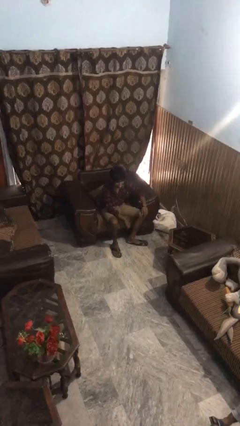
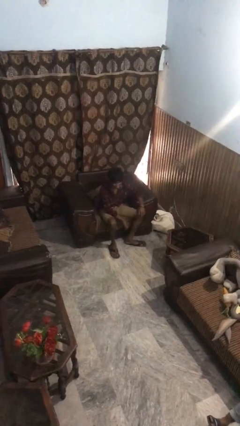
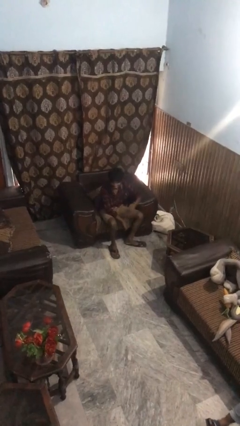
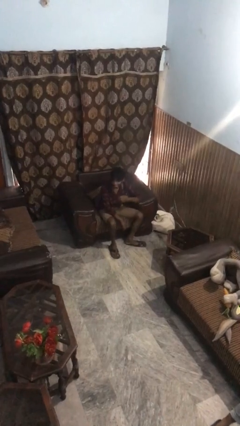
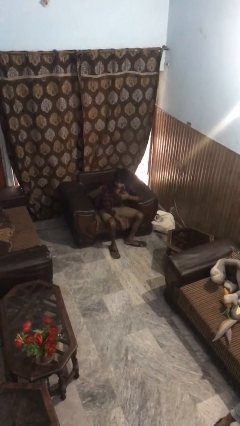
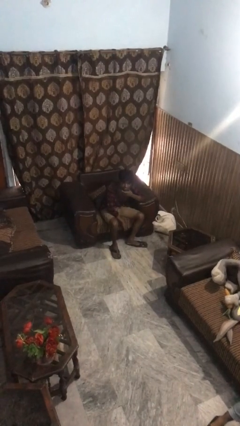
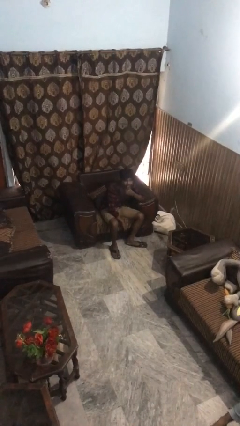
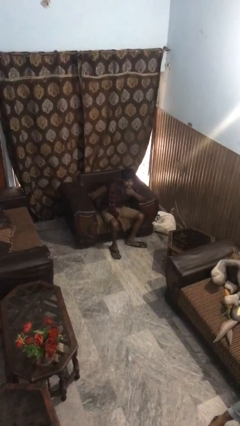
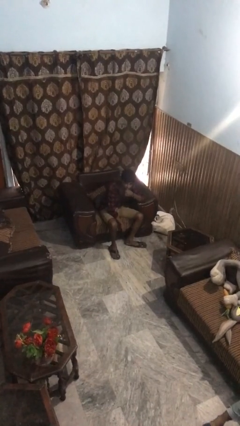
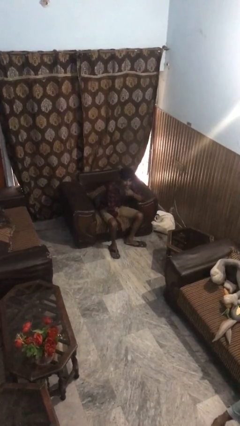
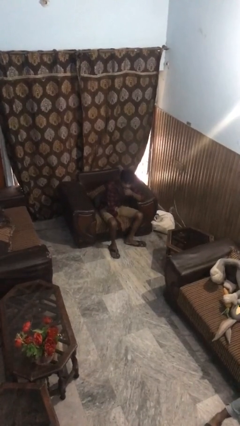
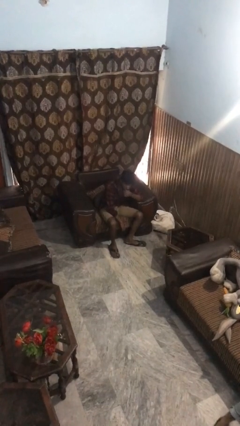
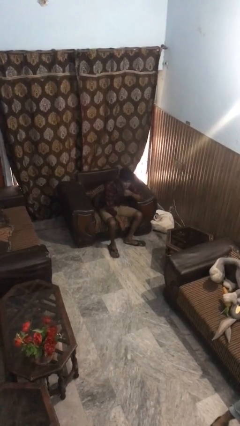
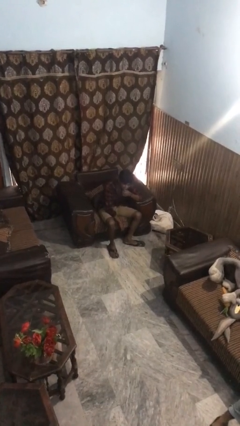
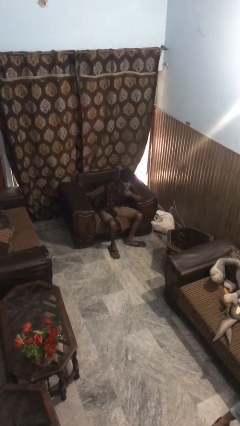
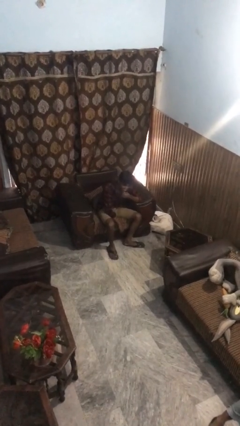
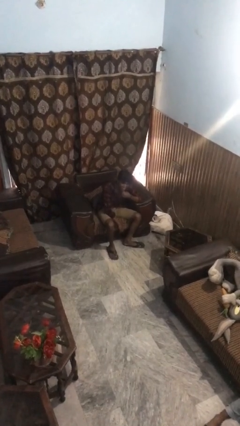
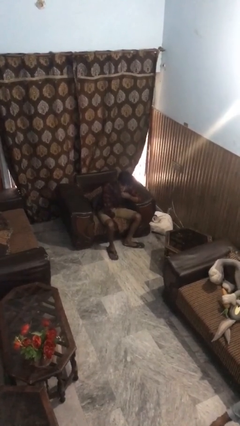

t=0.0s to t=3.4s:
person strokes chin

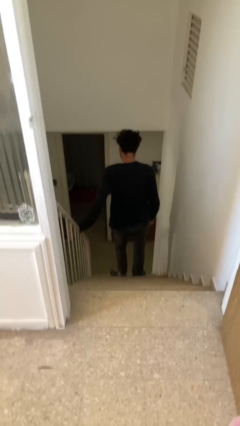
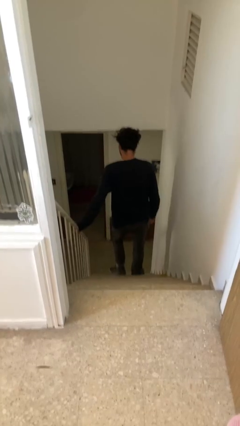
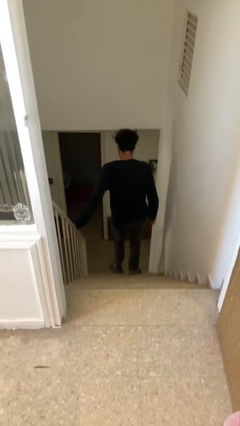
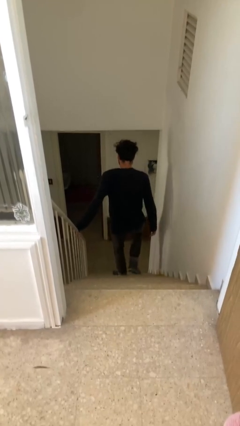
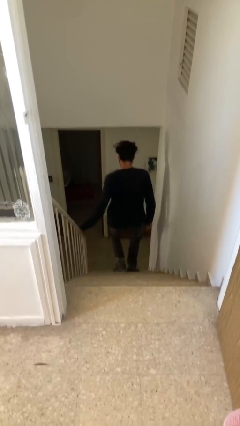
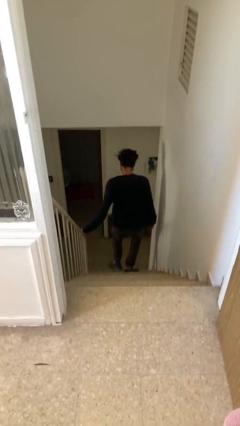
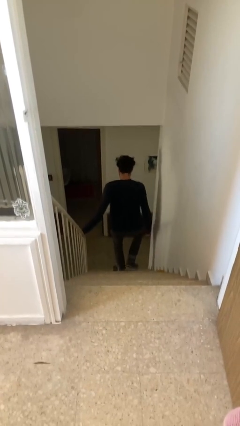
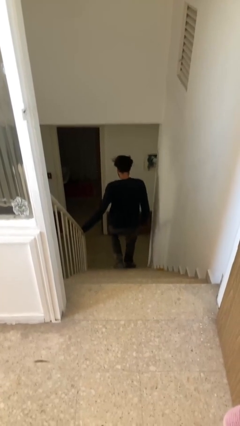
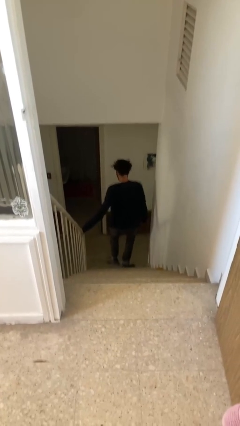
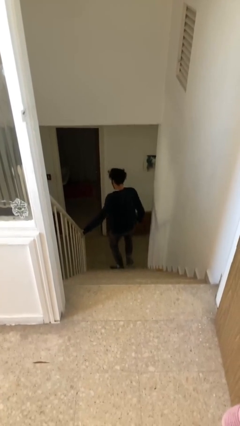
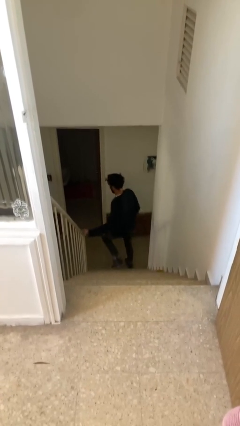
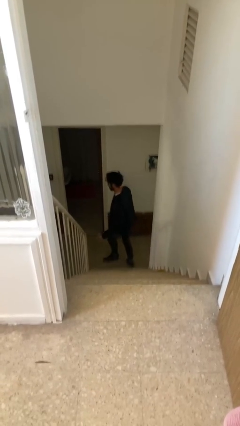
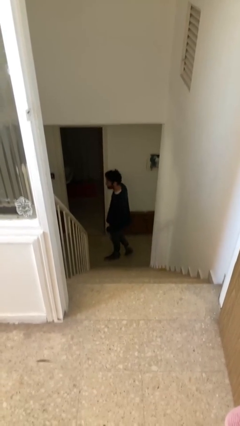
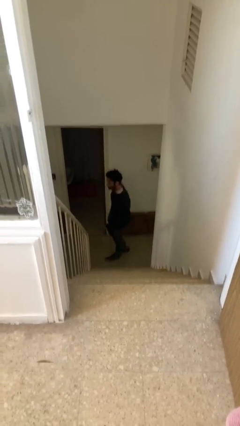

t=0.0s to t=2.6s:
person climbs down stairs

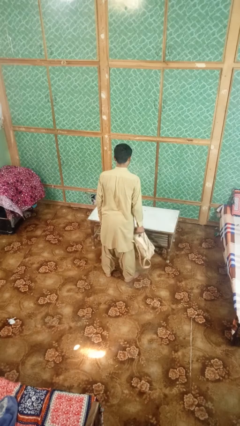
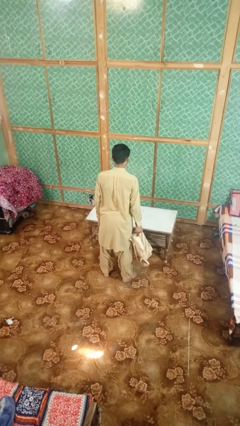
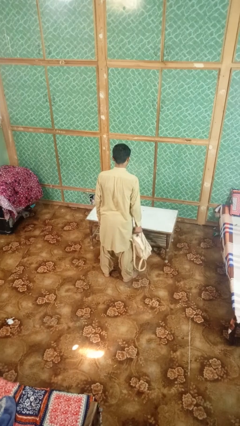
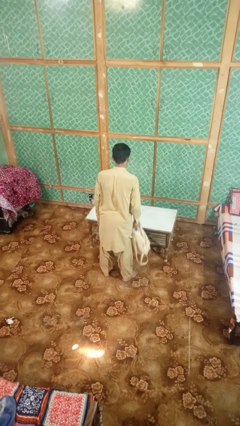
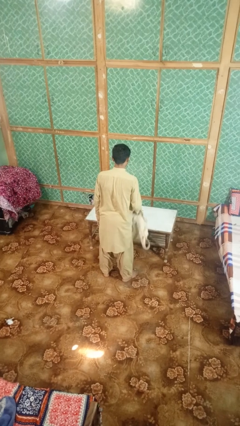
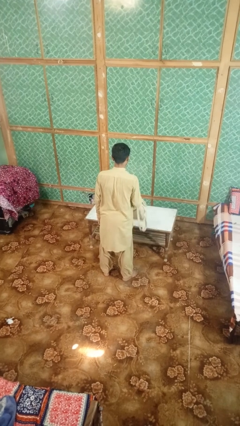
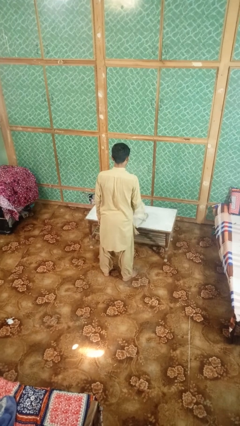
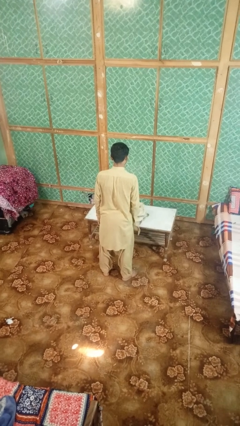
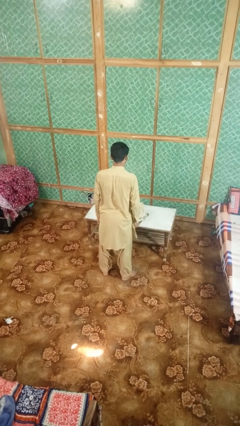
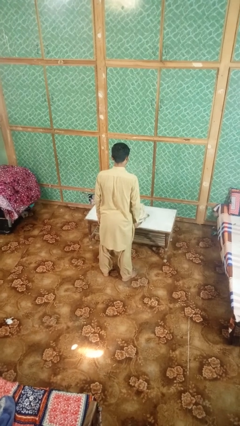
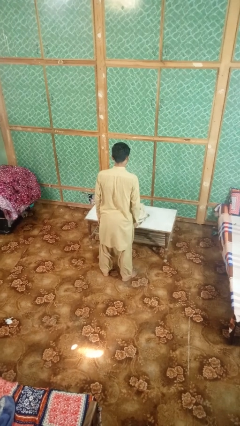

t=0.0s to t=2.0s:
person throws object on table

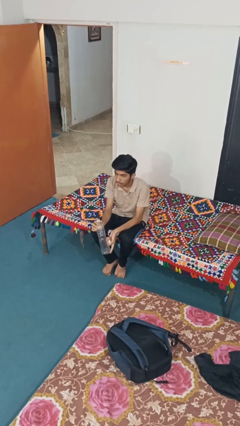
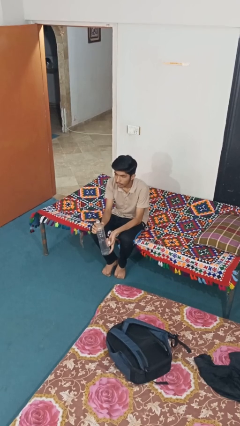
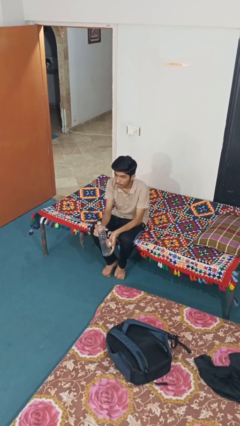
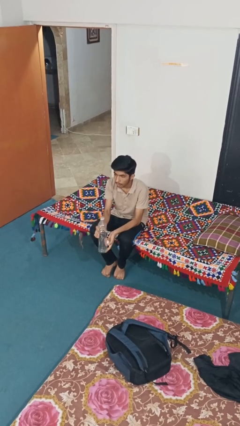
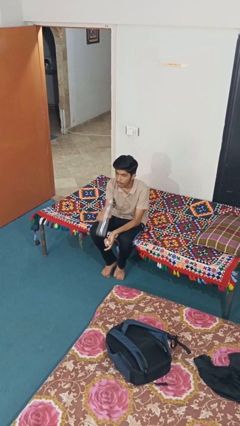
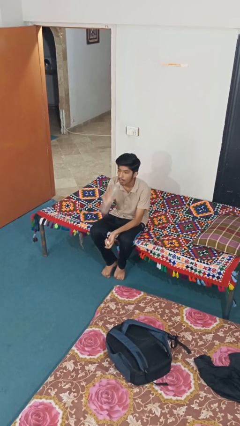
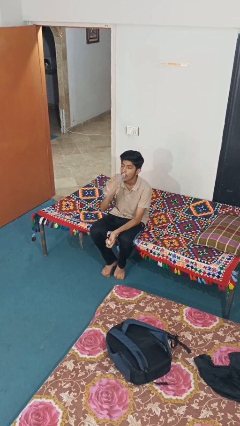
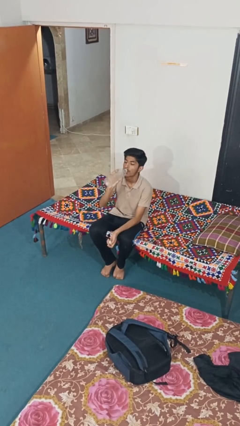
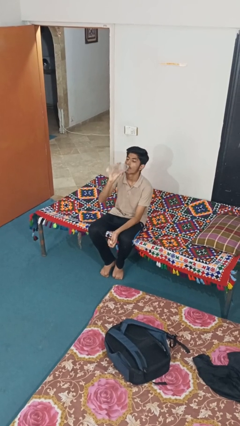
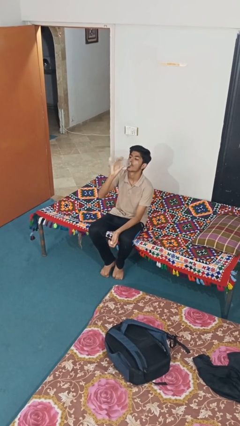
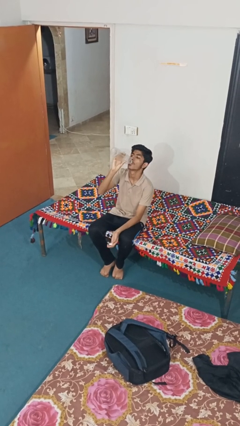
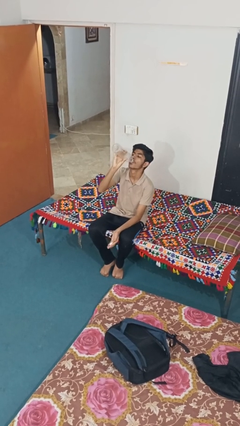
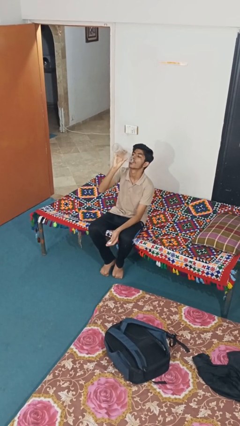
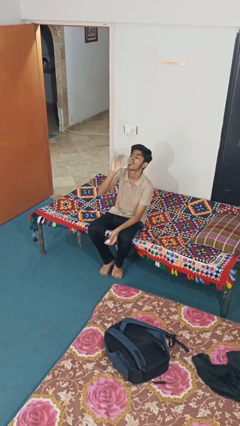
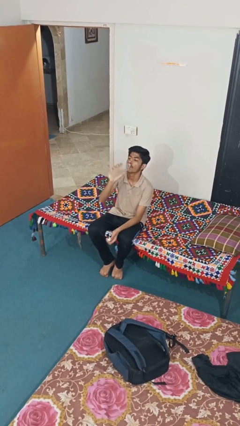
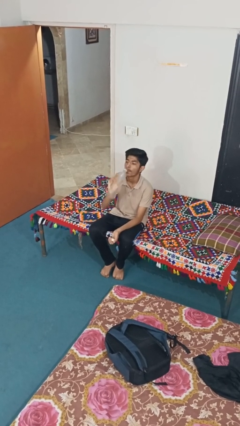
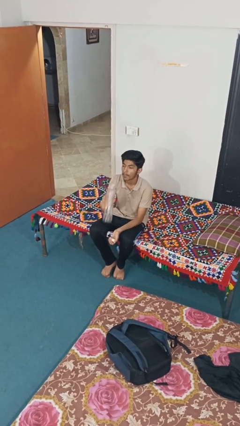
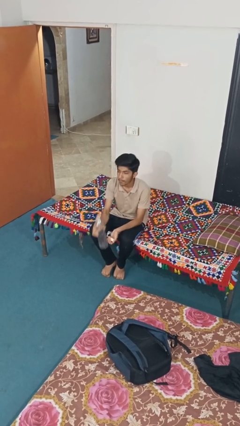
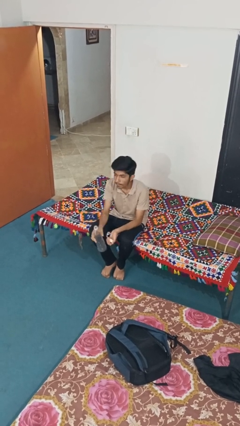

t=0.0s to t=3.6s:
person drinks from bottle

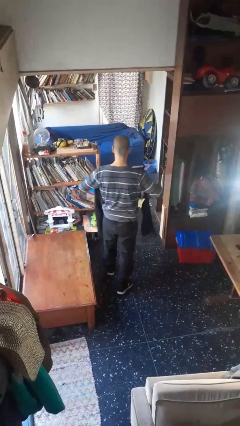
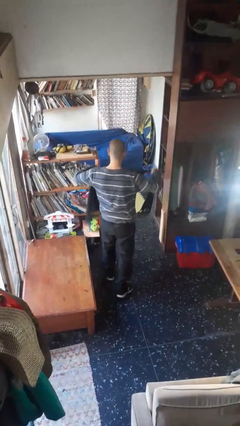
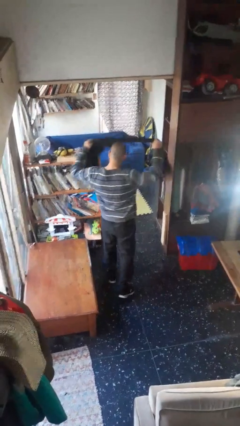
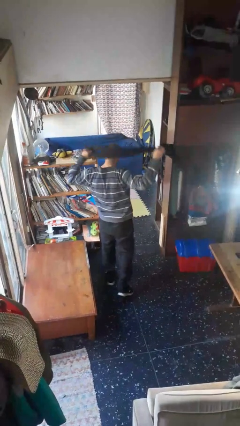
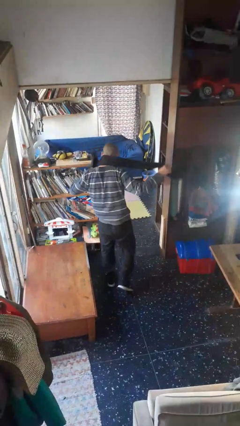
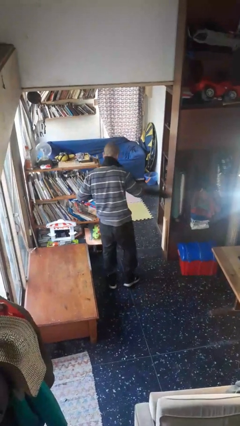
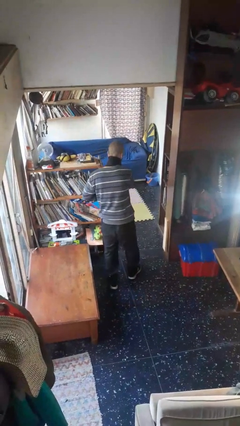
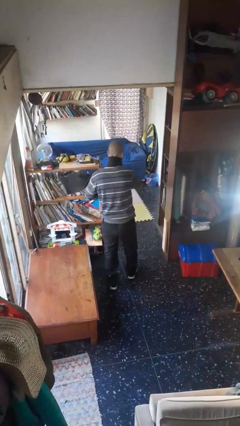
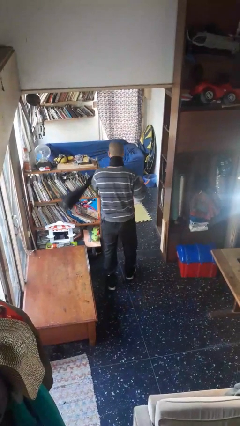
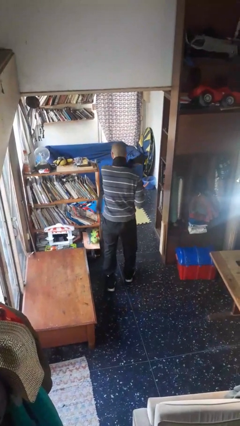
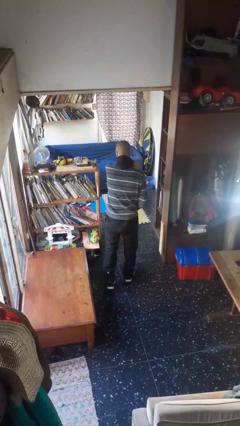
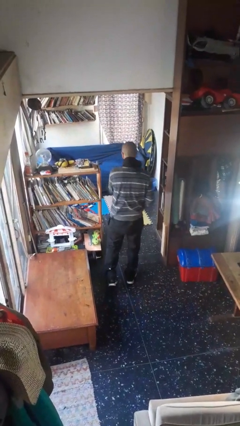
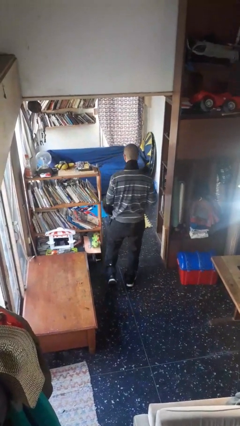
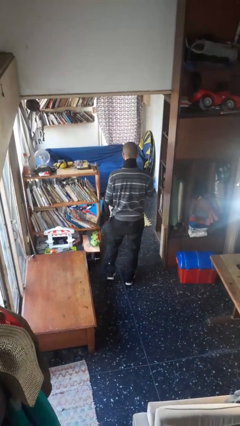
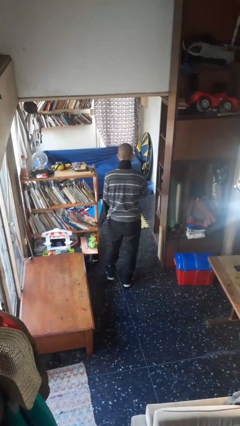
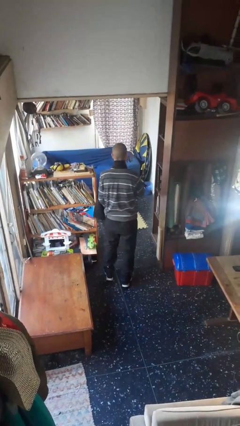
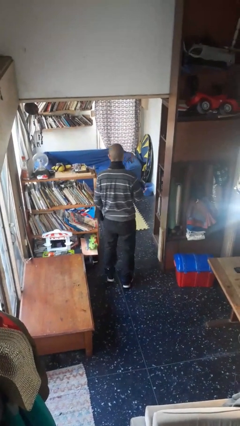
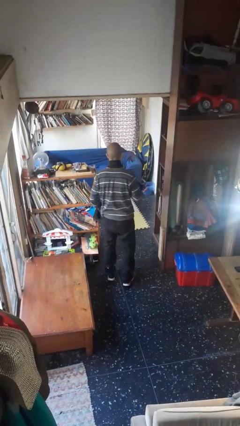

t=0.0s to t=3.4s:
person puts on scarf

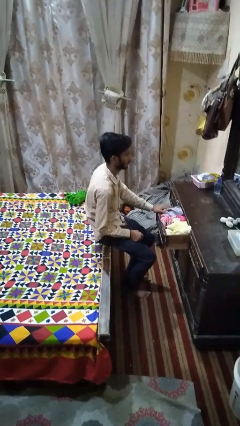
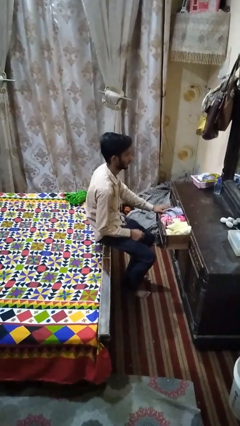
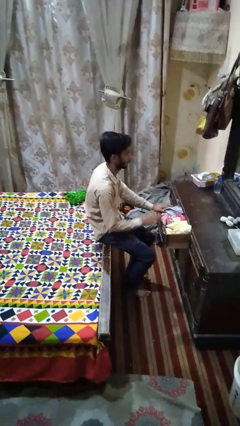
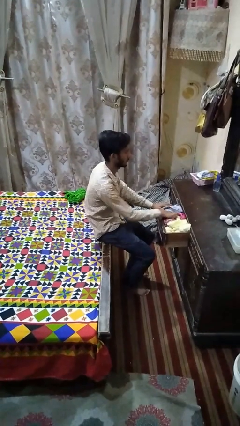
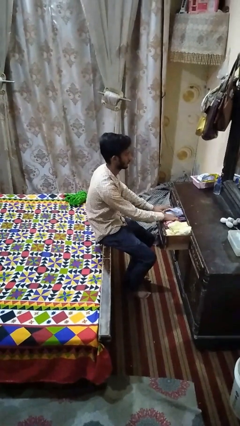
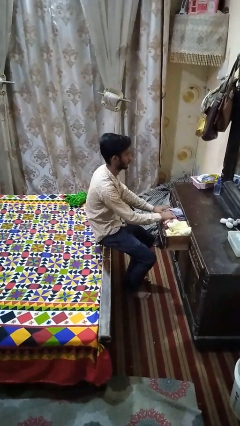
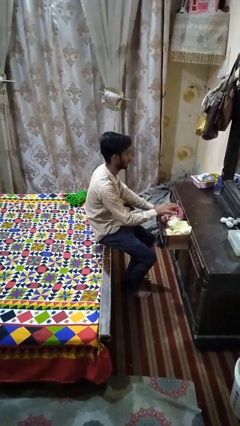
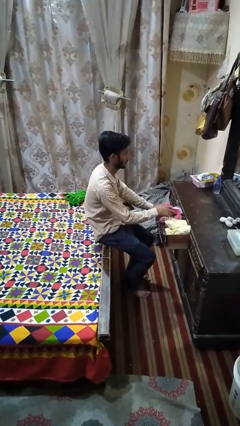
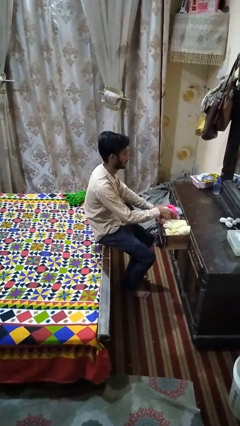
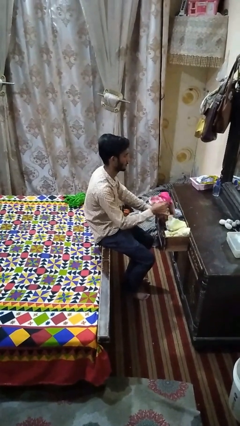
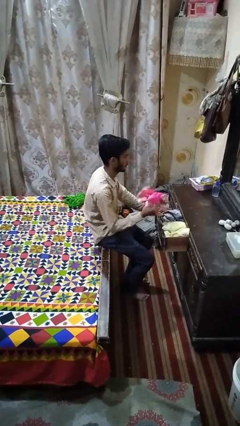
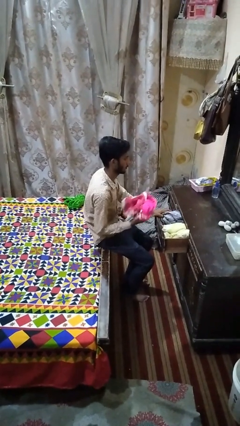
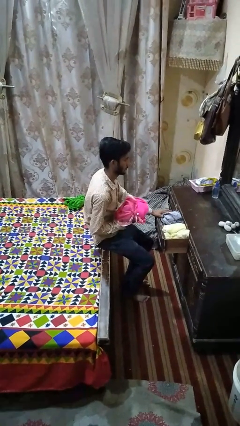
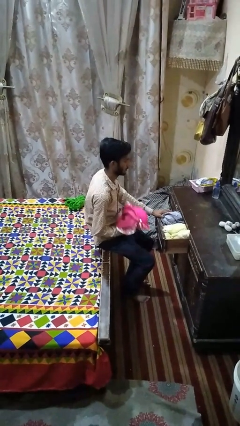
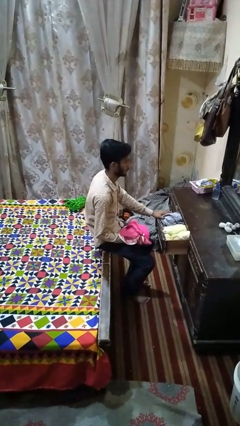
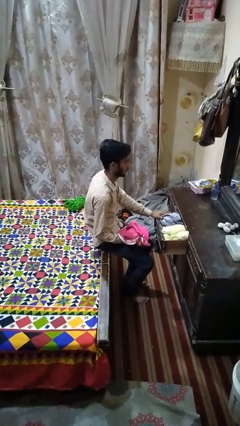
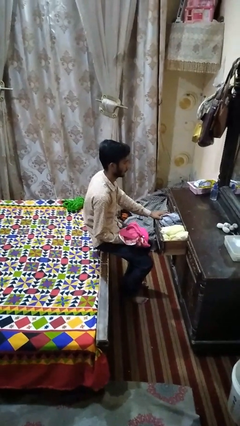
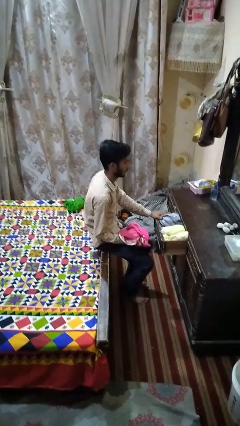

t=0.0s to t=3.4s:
person takes clothes from dresser
